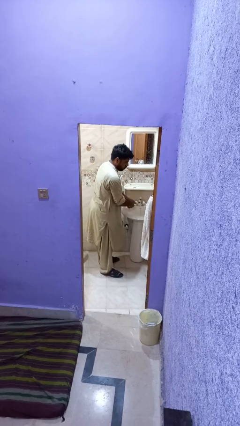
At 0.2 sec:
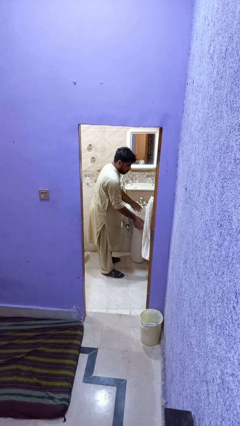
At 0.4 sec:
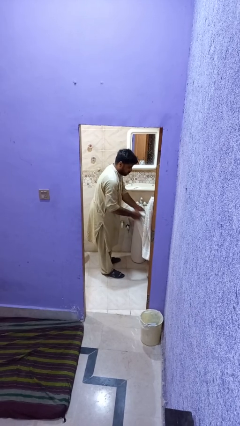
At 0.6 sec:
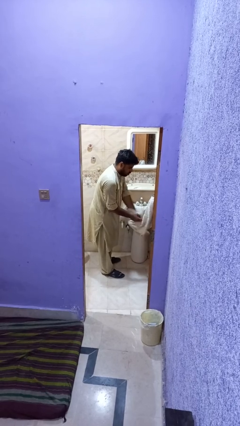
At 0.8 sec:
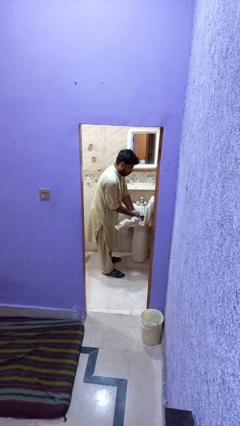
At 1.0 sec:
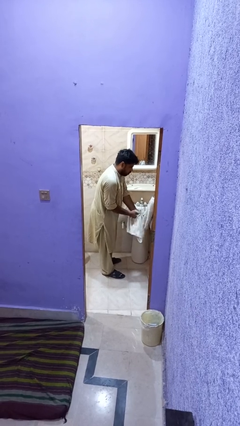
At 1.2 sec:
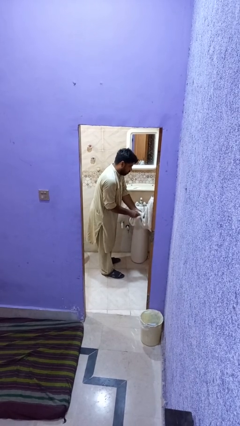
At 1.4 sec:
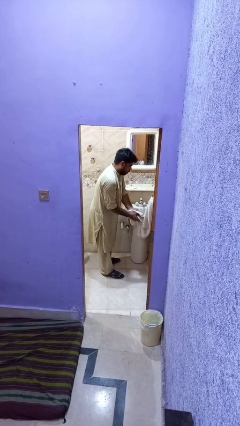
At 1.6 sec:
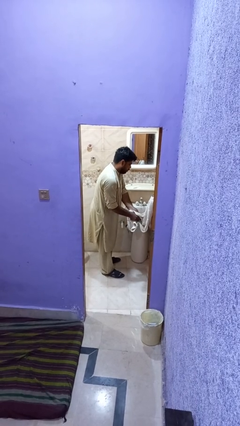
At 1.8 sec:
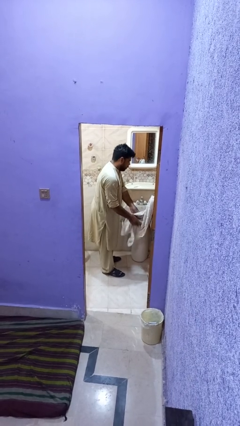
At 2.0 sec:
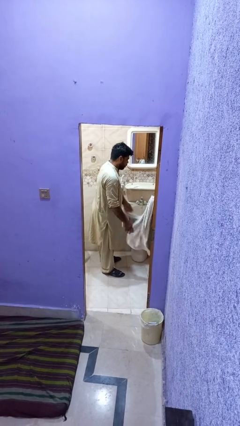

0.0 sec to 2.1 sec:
person dries hands with towel

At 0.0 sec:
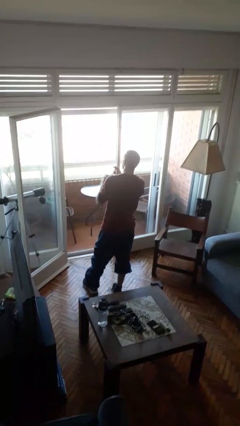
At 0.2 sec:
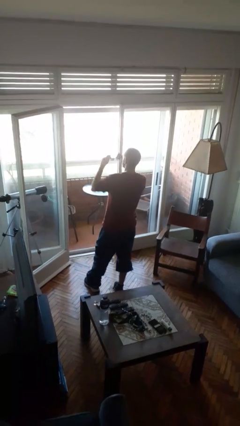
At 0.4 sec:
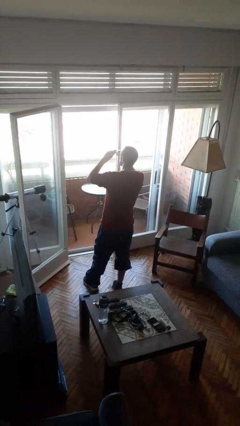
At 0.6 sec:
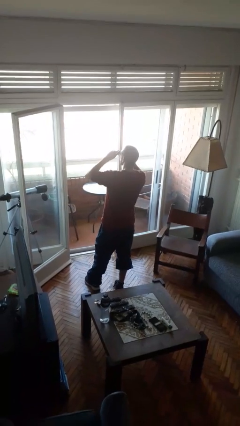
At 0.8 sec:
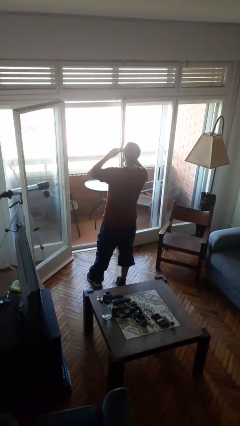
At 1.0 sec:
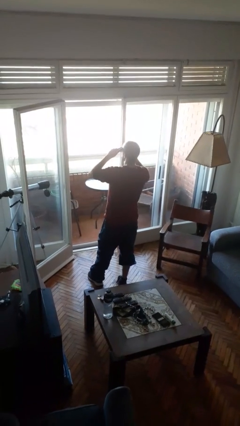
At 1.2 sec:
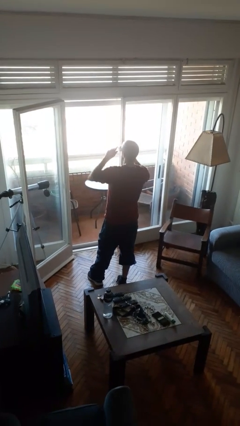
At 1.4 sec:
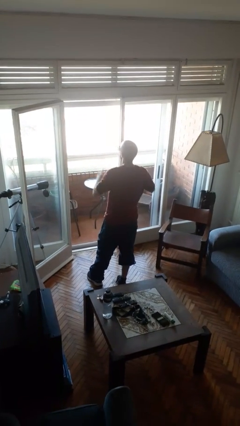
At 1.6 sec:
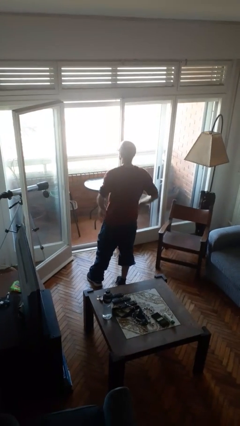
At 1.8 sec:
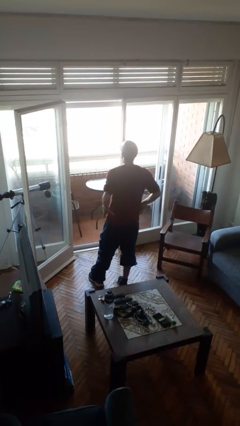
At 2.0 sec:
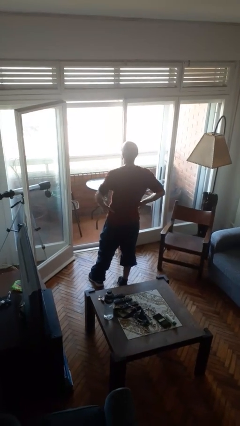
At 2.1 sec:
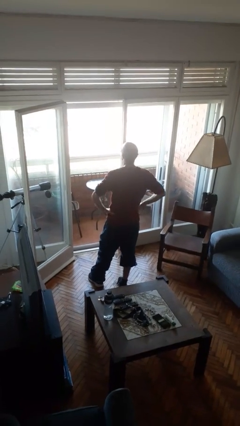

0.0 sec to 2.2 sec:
person puts on sunglasses

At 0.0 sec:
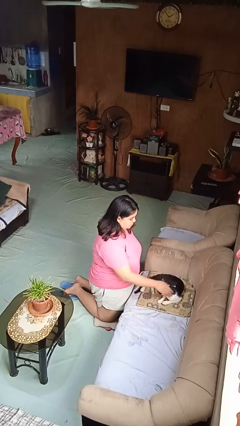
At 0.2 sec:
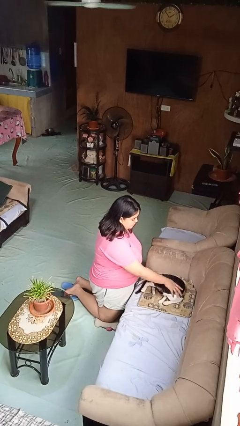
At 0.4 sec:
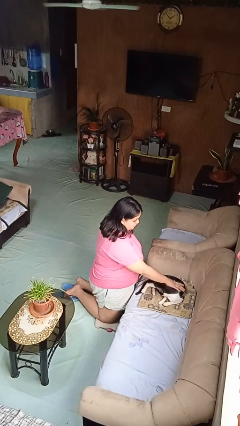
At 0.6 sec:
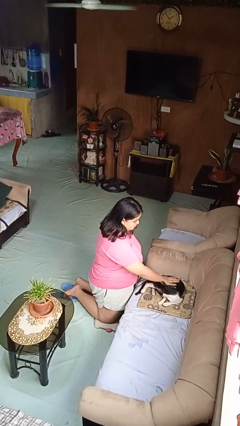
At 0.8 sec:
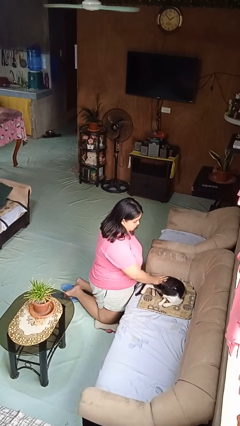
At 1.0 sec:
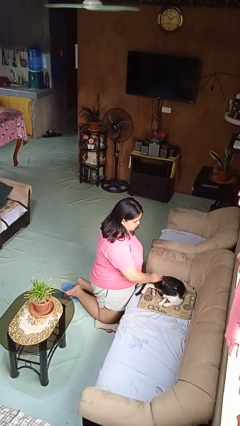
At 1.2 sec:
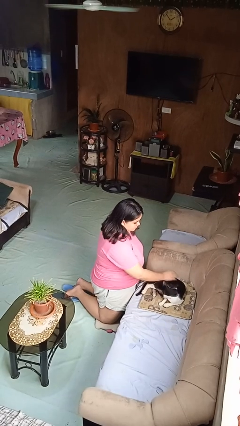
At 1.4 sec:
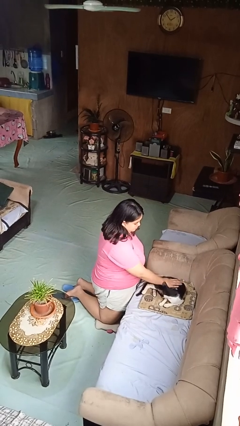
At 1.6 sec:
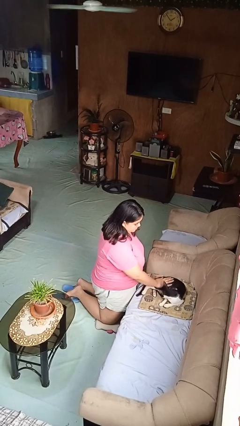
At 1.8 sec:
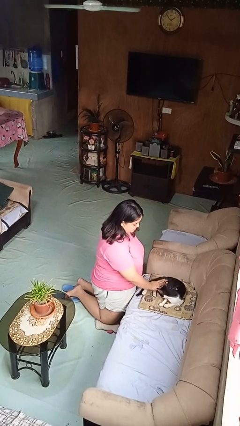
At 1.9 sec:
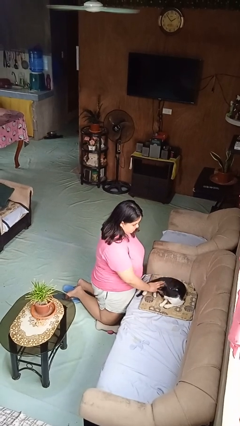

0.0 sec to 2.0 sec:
person pets cat

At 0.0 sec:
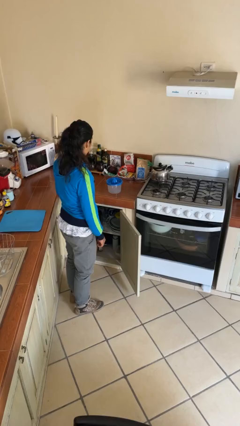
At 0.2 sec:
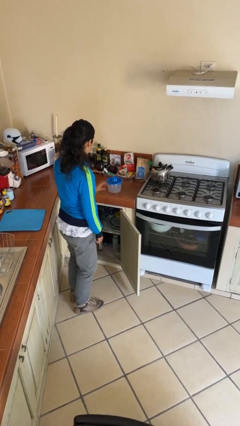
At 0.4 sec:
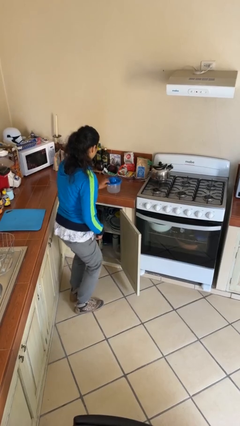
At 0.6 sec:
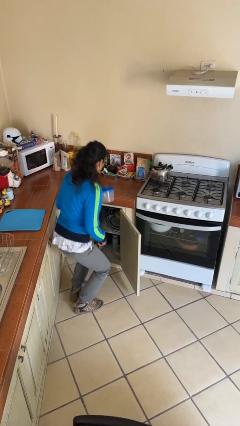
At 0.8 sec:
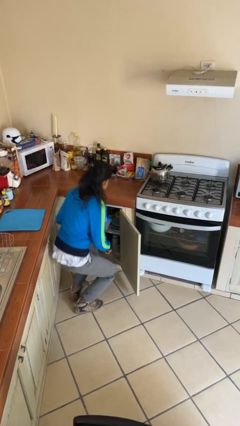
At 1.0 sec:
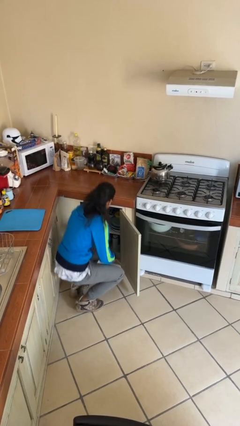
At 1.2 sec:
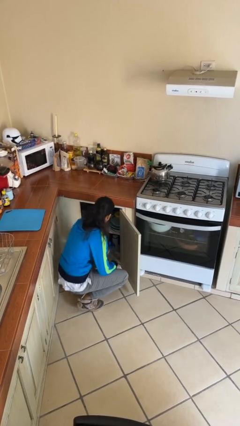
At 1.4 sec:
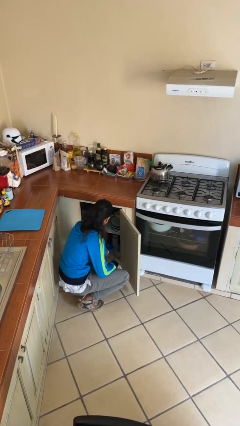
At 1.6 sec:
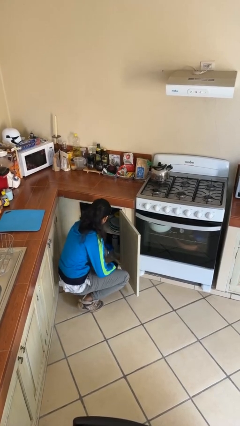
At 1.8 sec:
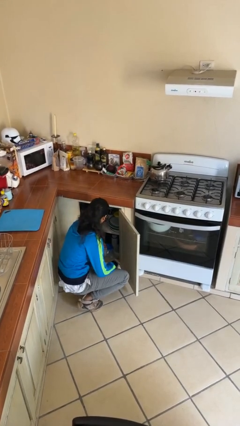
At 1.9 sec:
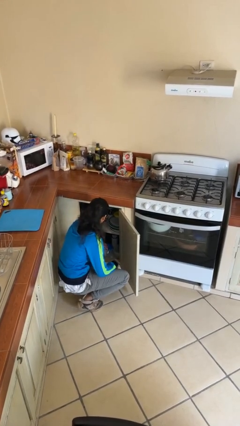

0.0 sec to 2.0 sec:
person puts object in cabinet

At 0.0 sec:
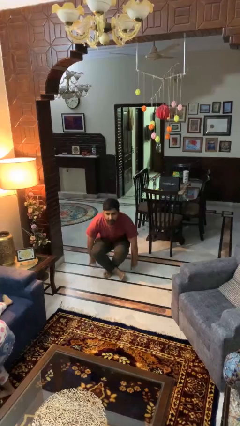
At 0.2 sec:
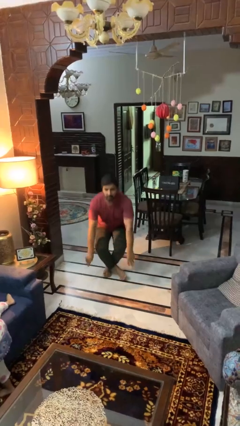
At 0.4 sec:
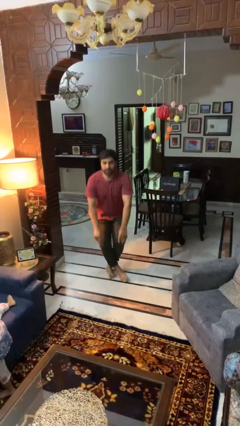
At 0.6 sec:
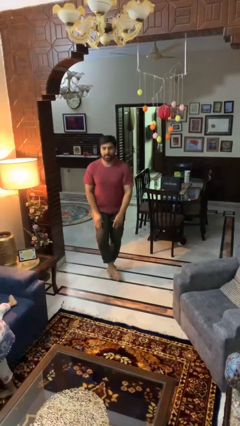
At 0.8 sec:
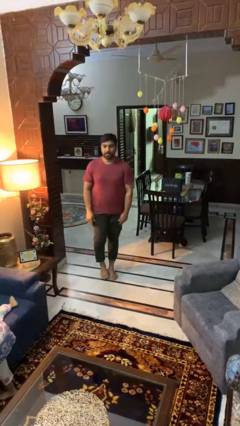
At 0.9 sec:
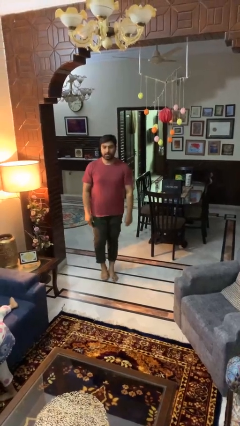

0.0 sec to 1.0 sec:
person stands up from floor

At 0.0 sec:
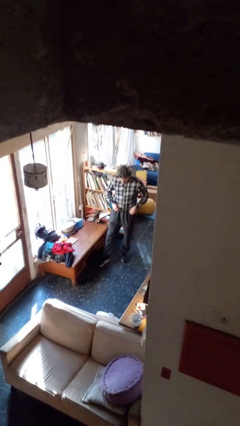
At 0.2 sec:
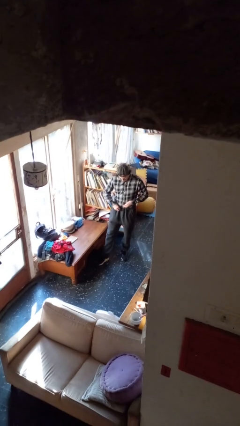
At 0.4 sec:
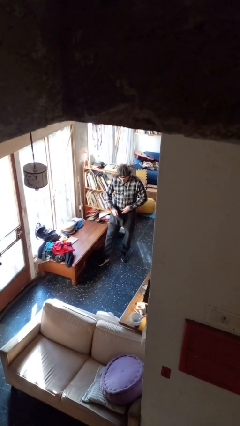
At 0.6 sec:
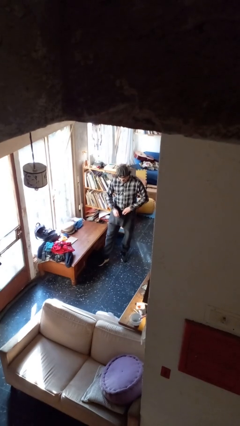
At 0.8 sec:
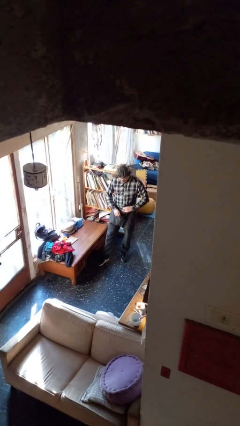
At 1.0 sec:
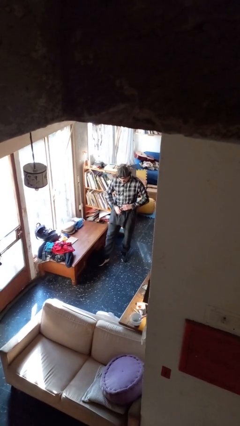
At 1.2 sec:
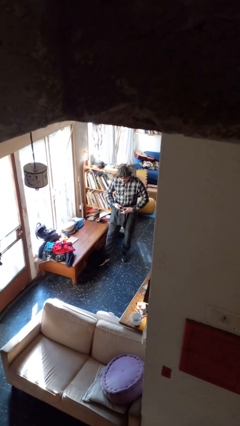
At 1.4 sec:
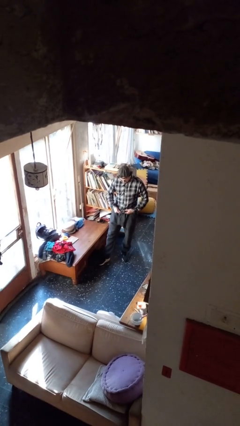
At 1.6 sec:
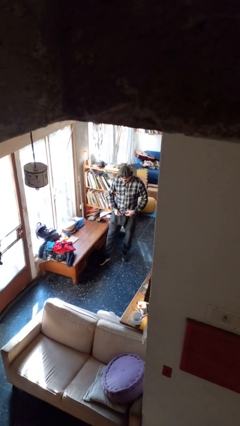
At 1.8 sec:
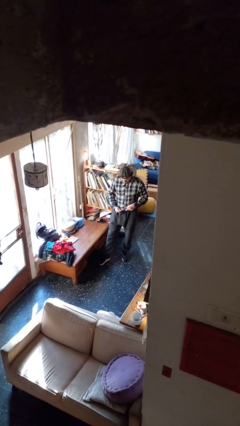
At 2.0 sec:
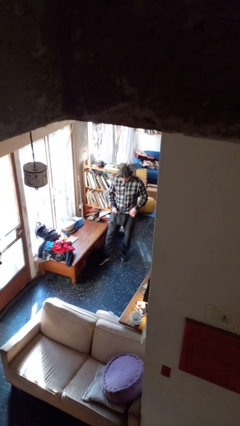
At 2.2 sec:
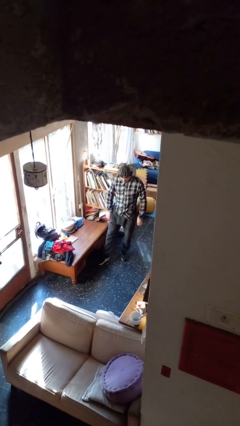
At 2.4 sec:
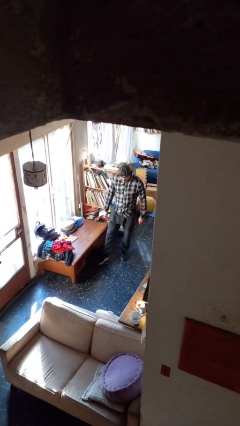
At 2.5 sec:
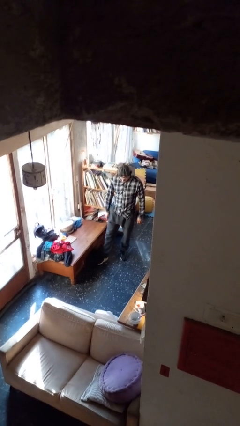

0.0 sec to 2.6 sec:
person untucks shirt

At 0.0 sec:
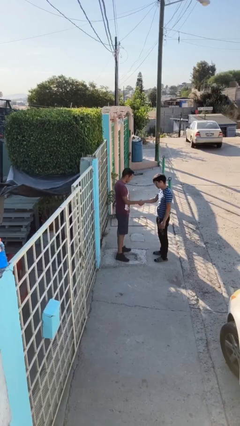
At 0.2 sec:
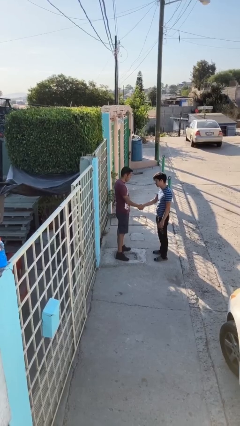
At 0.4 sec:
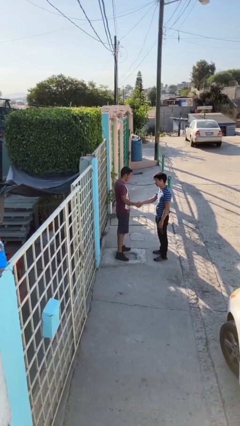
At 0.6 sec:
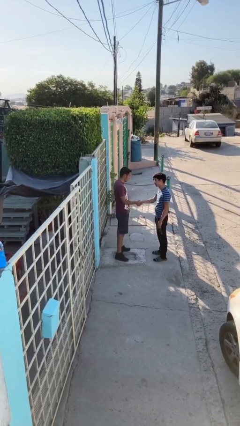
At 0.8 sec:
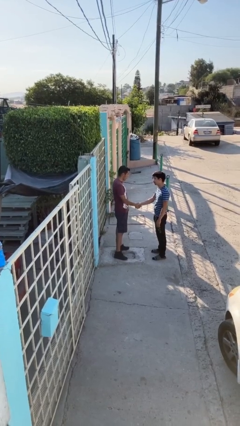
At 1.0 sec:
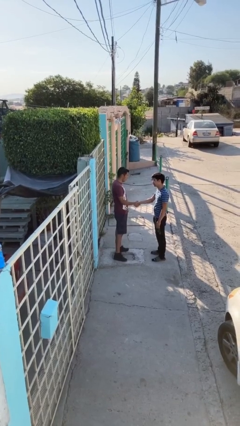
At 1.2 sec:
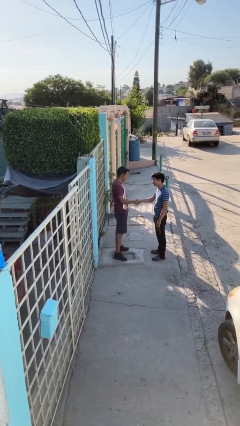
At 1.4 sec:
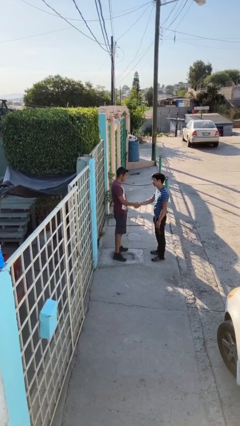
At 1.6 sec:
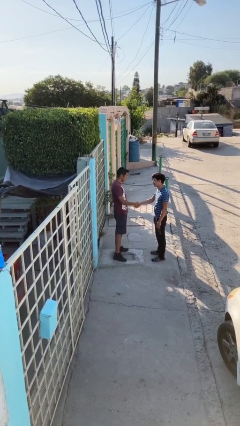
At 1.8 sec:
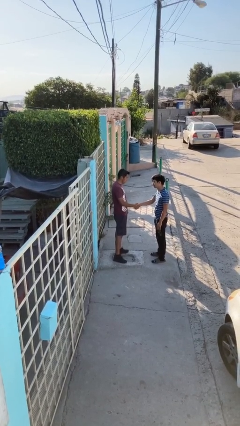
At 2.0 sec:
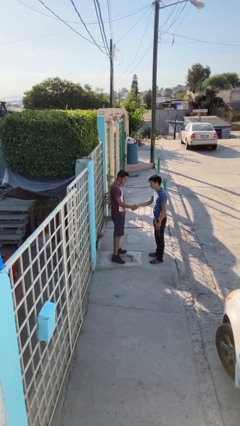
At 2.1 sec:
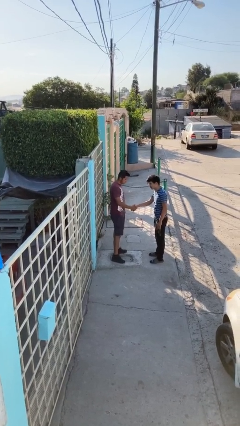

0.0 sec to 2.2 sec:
person shakes hand

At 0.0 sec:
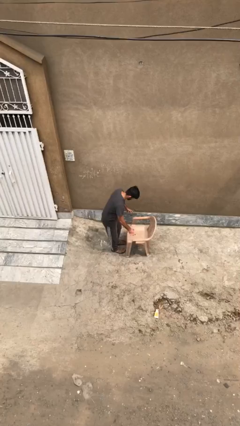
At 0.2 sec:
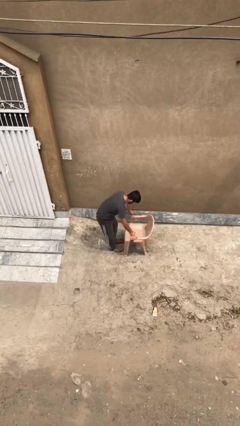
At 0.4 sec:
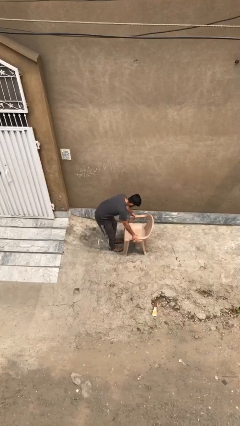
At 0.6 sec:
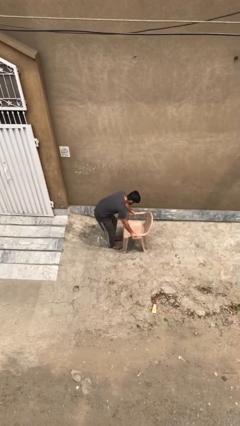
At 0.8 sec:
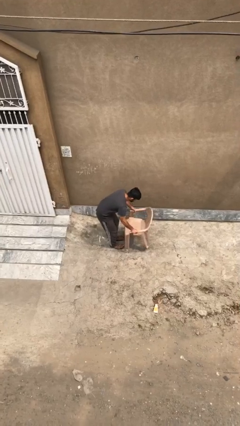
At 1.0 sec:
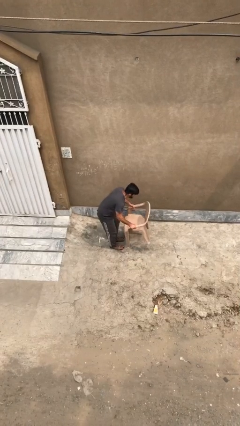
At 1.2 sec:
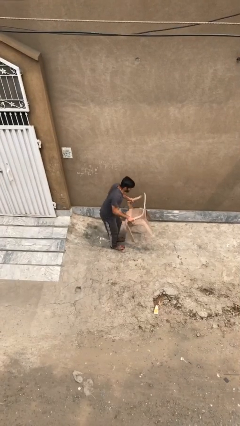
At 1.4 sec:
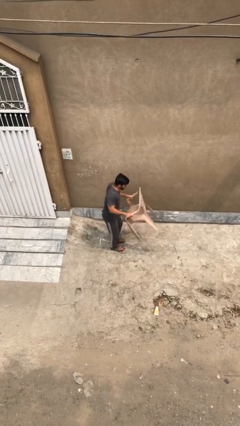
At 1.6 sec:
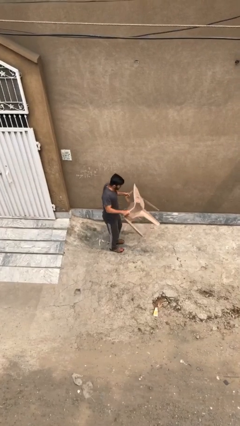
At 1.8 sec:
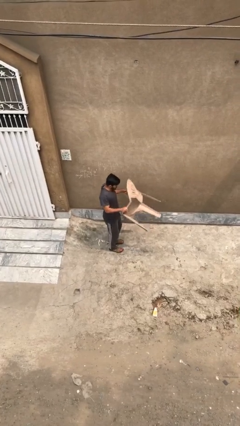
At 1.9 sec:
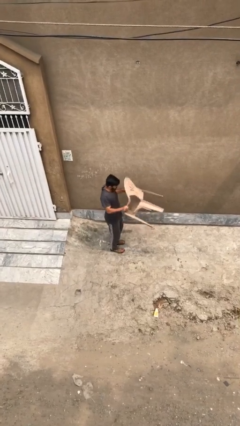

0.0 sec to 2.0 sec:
person picks up object from floor

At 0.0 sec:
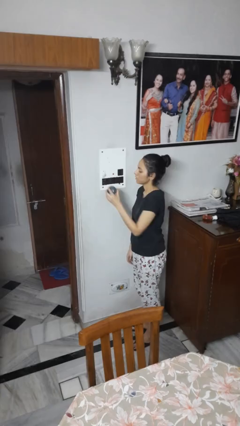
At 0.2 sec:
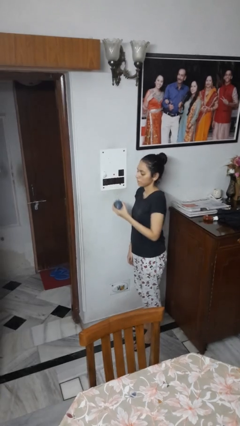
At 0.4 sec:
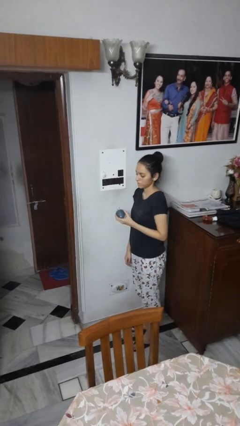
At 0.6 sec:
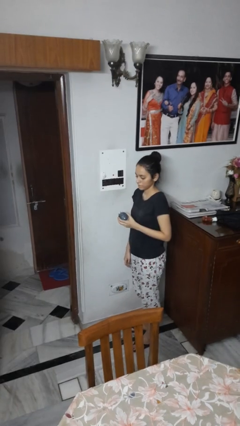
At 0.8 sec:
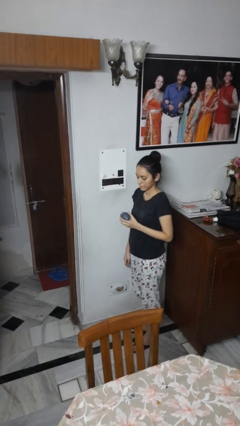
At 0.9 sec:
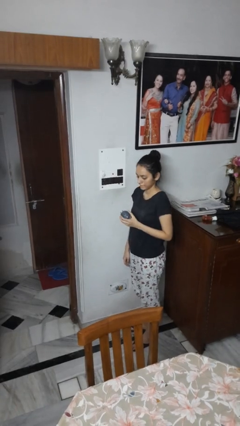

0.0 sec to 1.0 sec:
person unplugs from electrical socket
